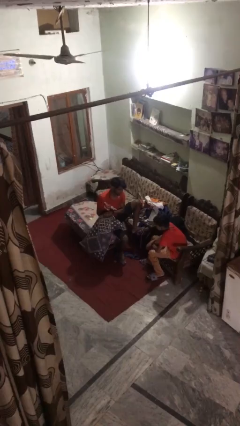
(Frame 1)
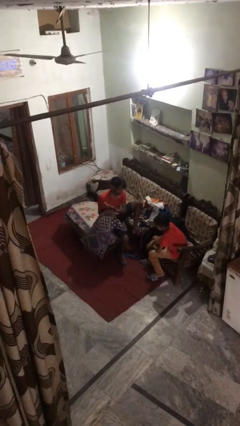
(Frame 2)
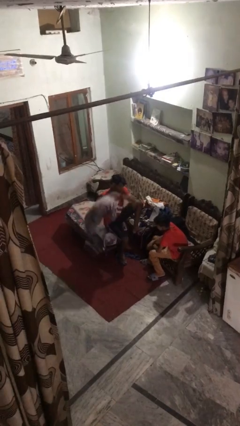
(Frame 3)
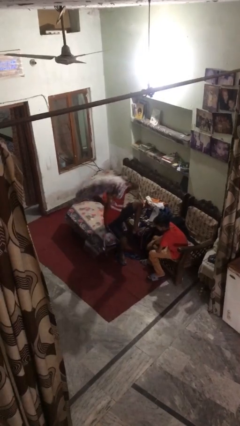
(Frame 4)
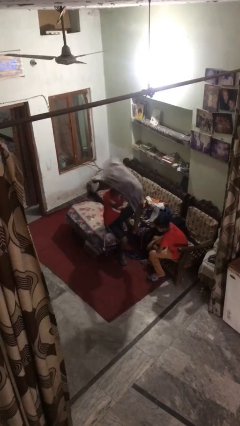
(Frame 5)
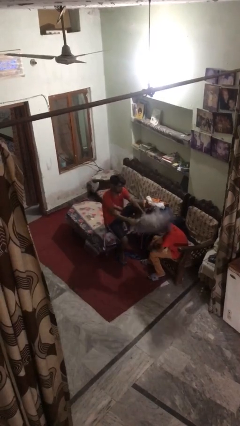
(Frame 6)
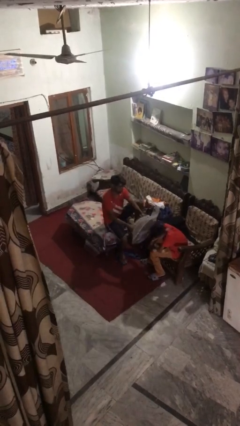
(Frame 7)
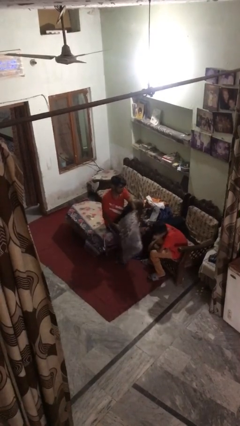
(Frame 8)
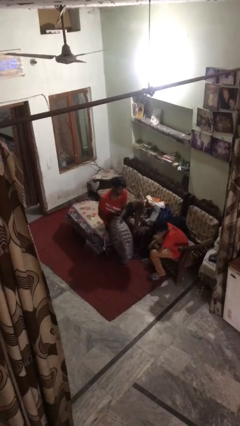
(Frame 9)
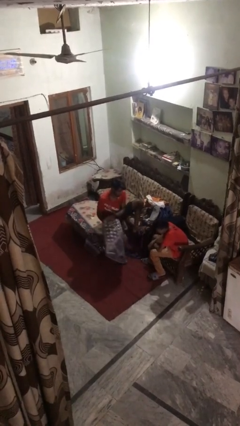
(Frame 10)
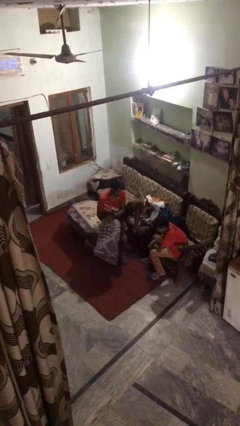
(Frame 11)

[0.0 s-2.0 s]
person hits person with pillow

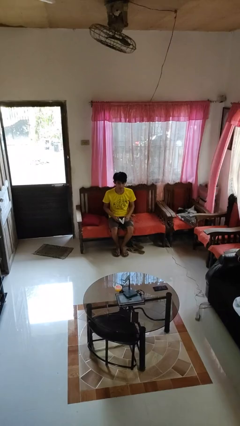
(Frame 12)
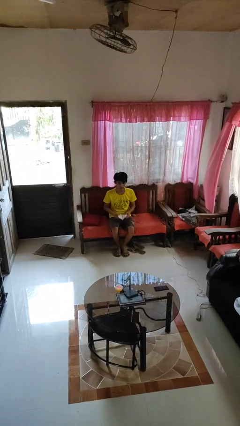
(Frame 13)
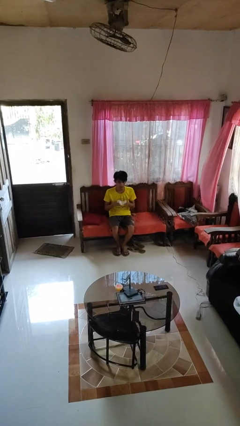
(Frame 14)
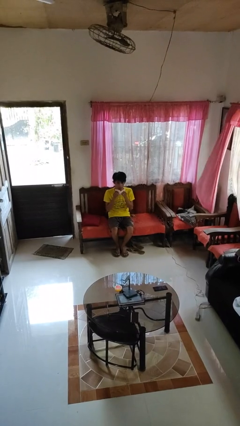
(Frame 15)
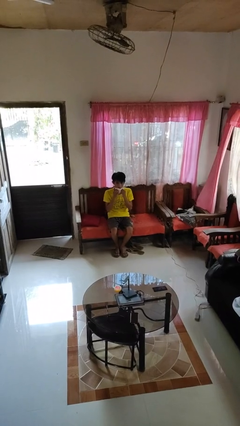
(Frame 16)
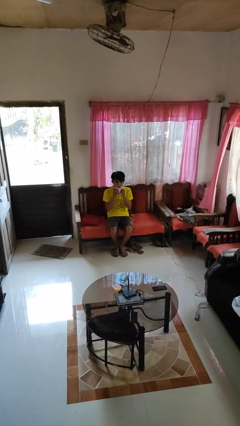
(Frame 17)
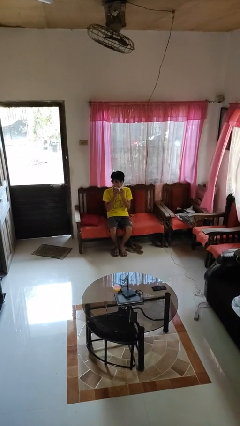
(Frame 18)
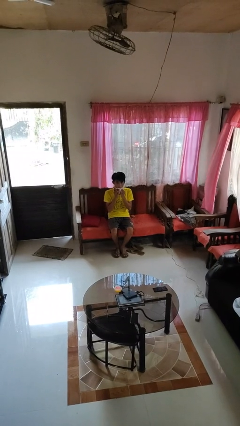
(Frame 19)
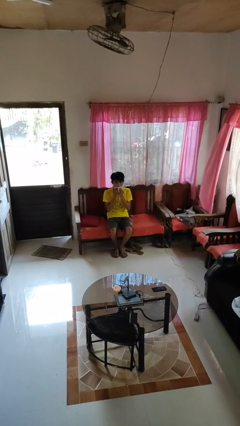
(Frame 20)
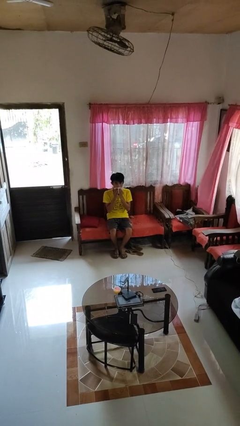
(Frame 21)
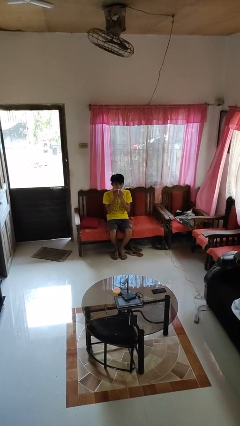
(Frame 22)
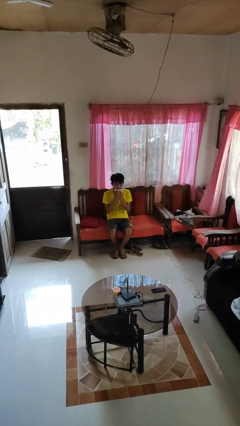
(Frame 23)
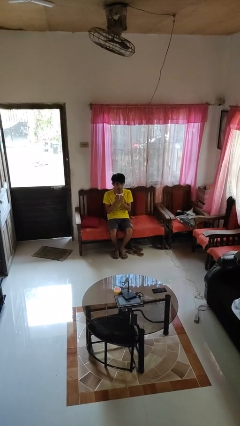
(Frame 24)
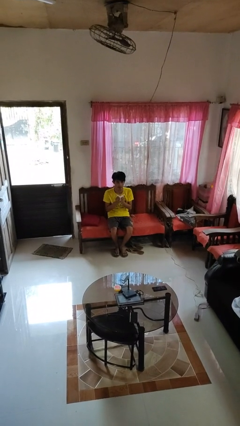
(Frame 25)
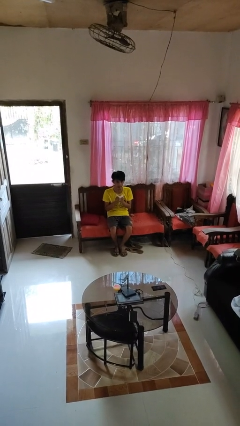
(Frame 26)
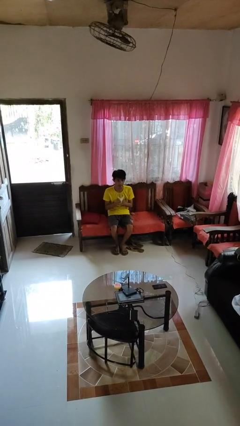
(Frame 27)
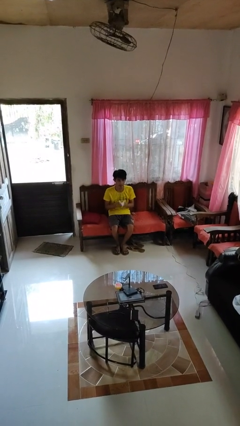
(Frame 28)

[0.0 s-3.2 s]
person wipes mouth with napkin

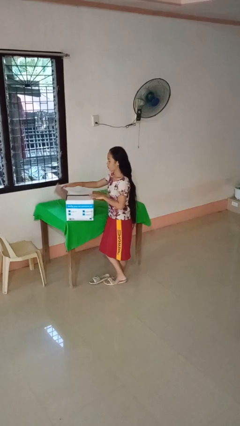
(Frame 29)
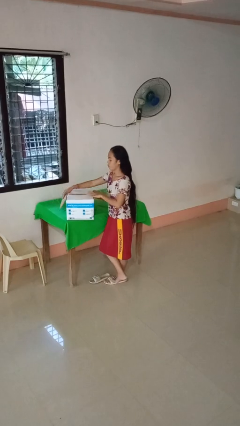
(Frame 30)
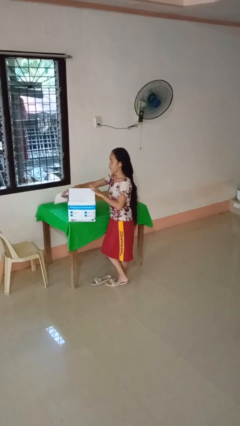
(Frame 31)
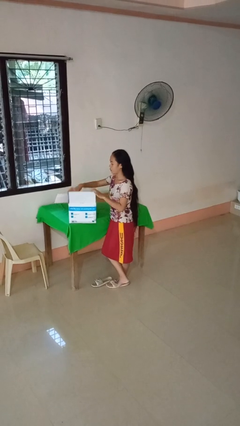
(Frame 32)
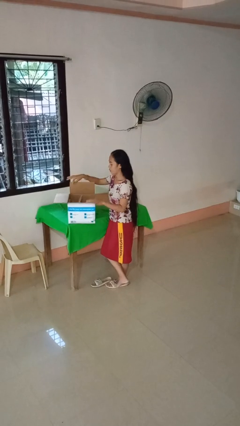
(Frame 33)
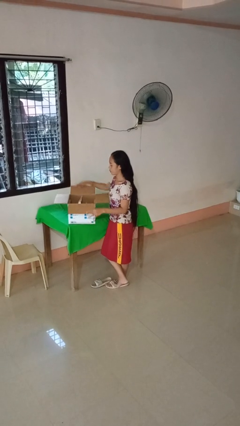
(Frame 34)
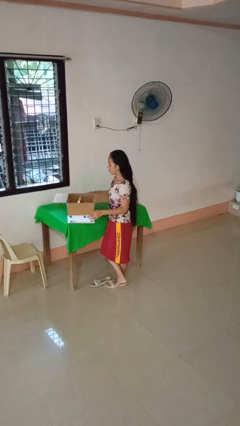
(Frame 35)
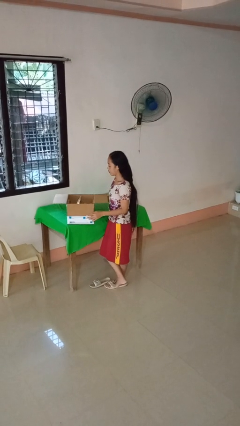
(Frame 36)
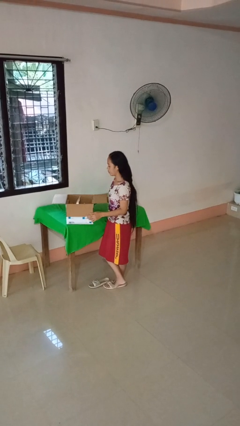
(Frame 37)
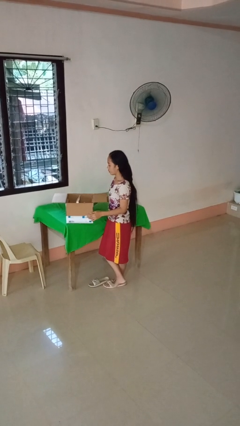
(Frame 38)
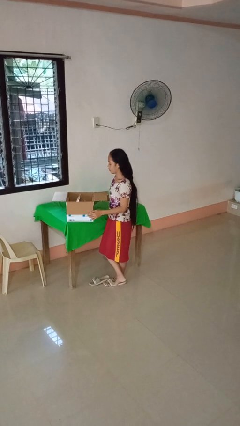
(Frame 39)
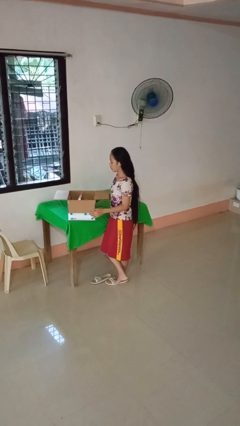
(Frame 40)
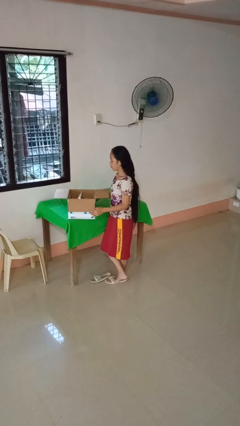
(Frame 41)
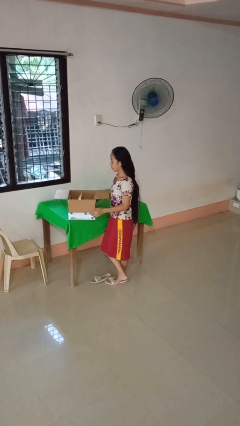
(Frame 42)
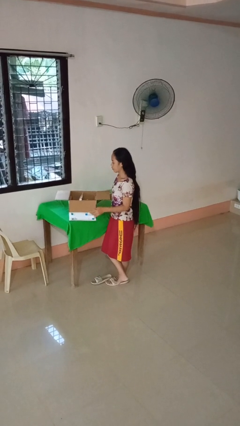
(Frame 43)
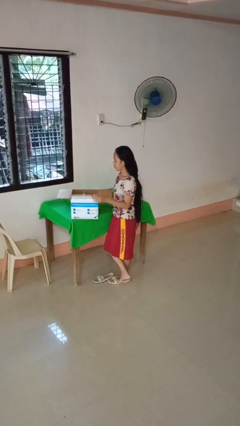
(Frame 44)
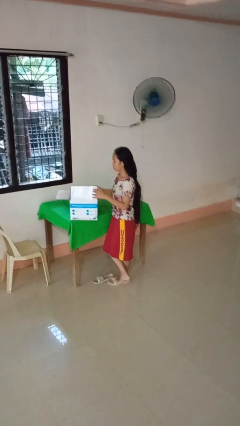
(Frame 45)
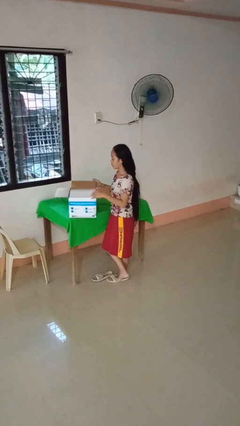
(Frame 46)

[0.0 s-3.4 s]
person opens box

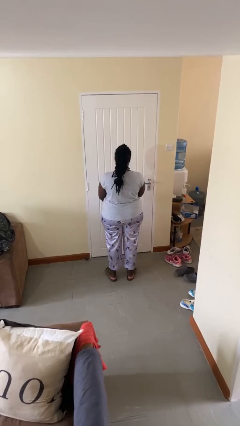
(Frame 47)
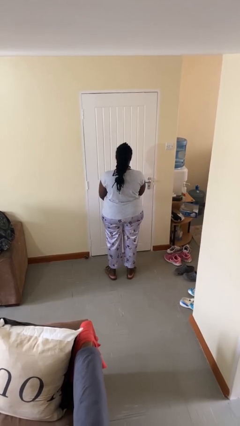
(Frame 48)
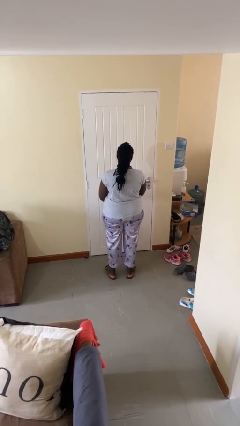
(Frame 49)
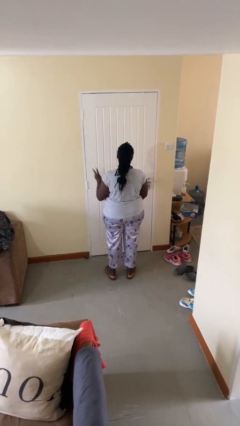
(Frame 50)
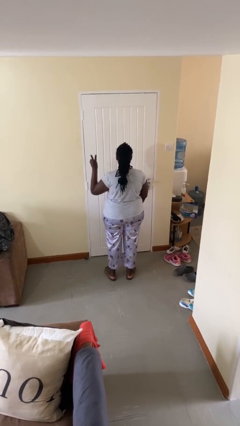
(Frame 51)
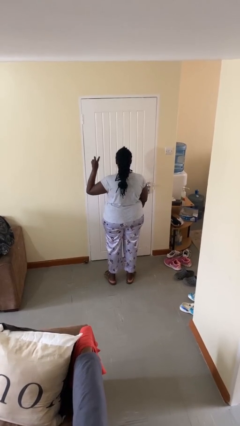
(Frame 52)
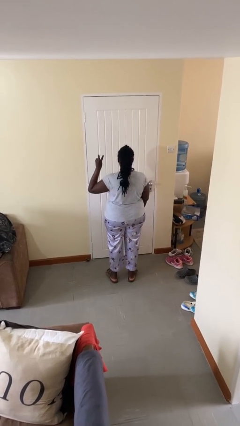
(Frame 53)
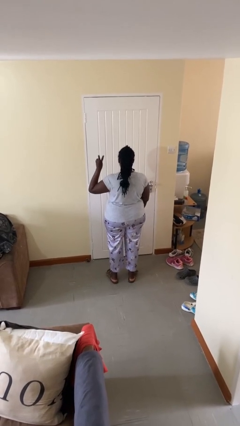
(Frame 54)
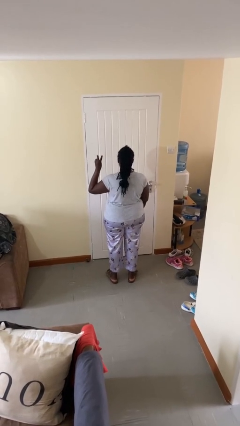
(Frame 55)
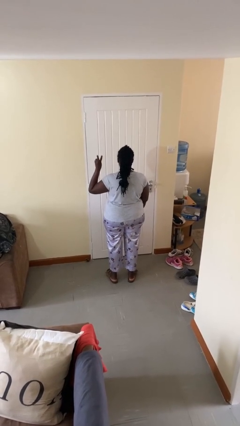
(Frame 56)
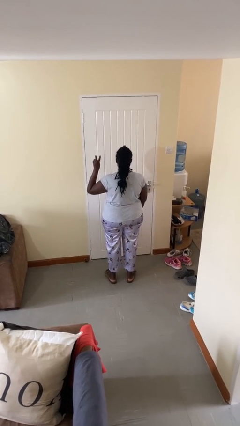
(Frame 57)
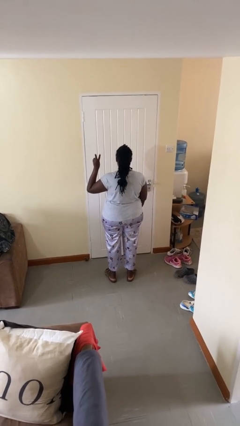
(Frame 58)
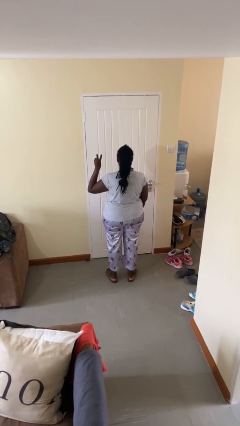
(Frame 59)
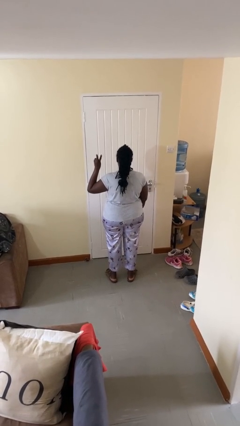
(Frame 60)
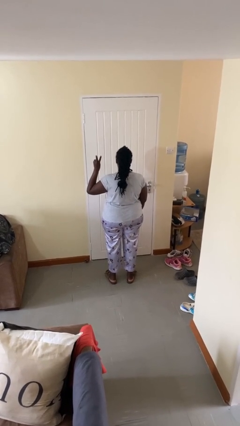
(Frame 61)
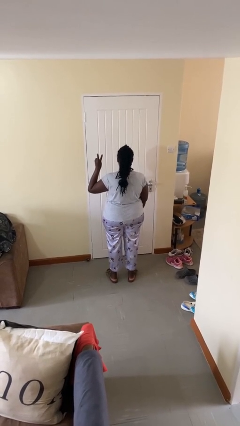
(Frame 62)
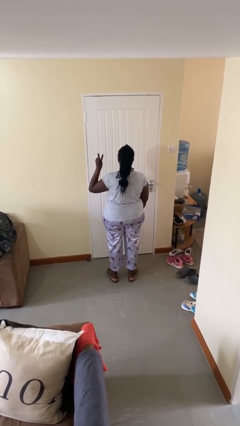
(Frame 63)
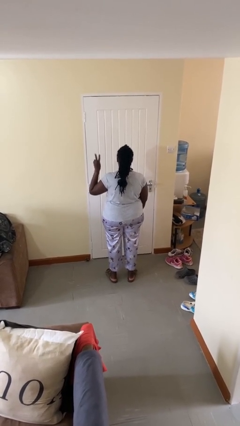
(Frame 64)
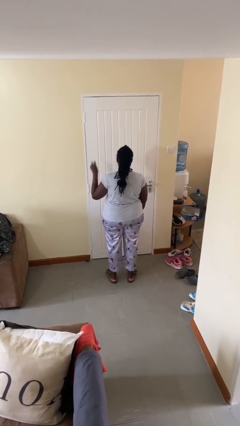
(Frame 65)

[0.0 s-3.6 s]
person gestures peace

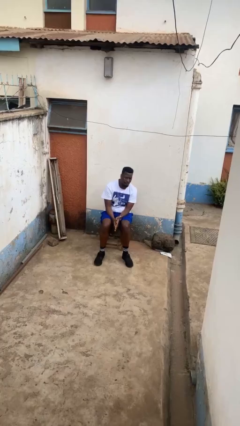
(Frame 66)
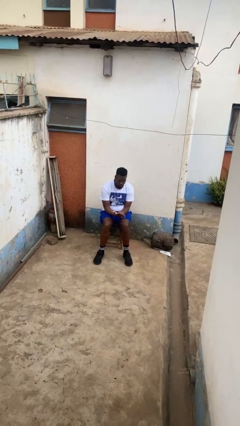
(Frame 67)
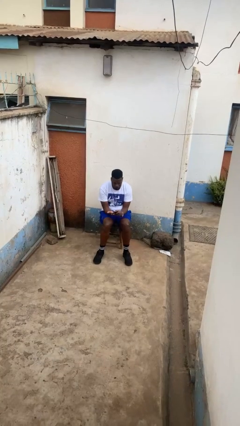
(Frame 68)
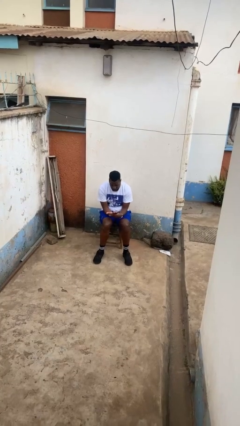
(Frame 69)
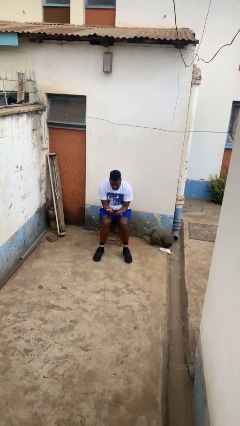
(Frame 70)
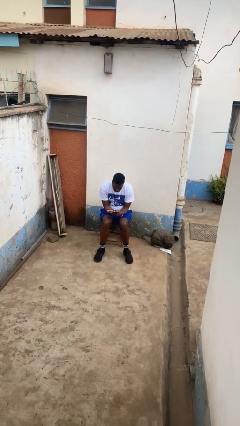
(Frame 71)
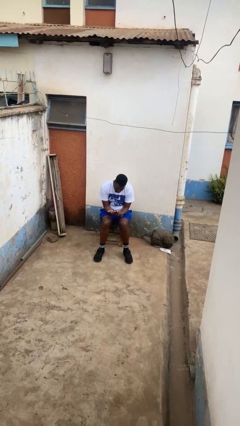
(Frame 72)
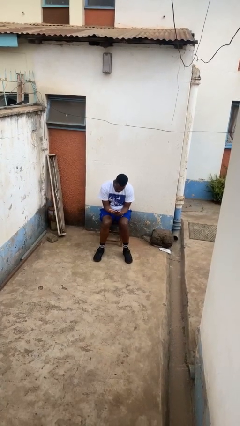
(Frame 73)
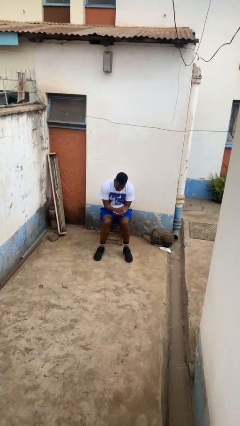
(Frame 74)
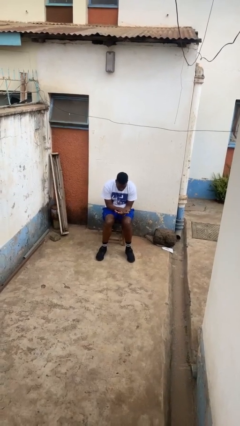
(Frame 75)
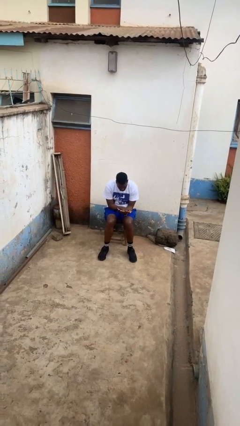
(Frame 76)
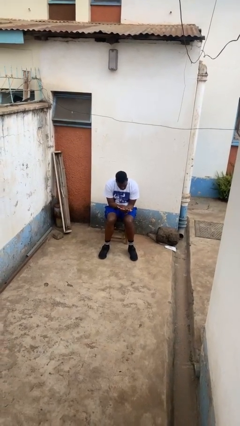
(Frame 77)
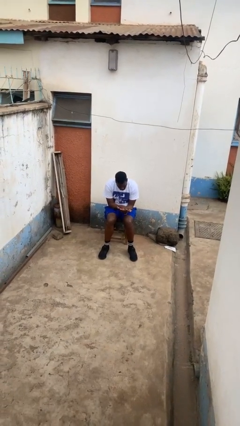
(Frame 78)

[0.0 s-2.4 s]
person looks at hands in lap

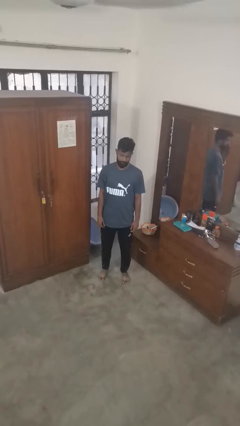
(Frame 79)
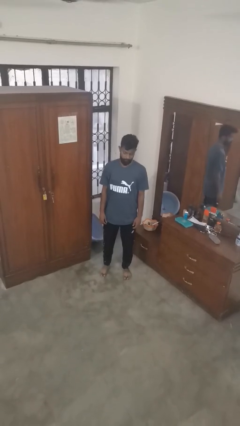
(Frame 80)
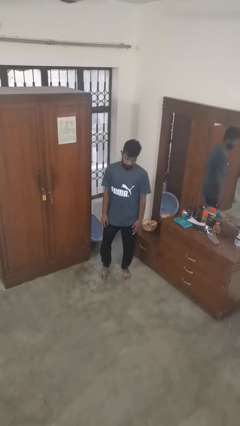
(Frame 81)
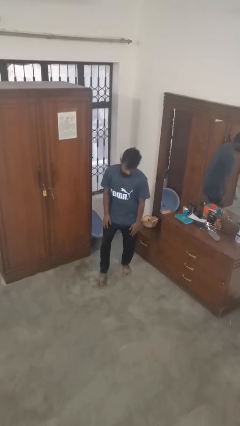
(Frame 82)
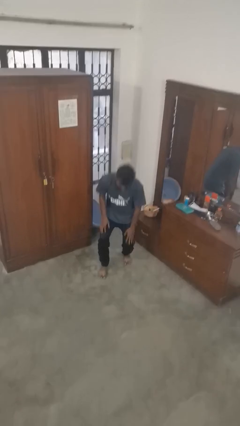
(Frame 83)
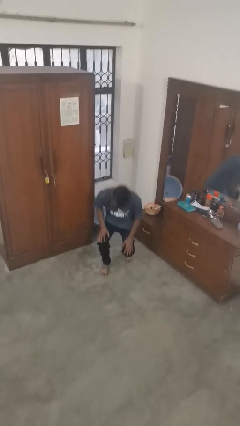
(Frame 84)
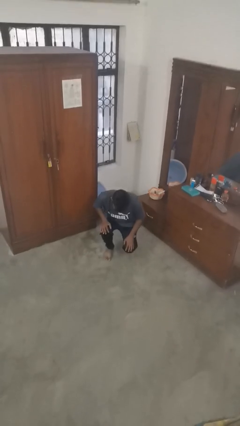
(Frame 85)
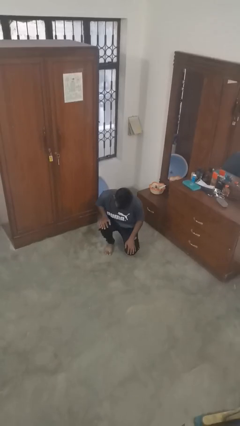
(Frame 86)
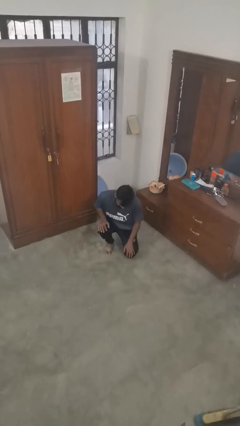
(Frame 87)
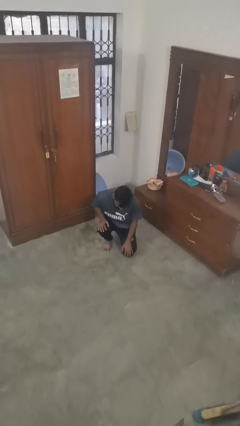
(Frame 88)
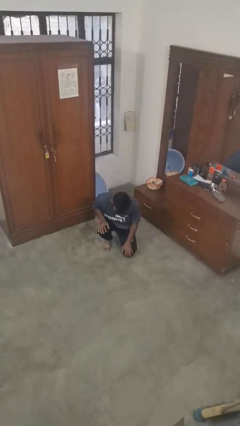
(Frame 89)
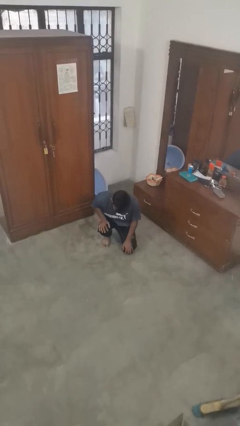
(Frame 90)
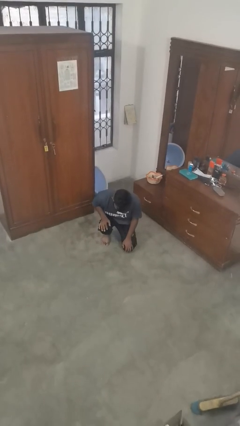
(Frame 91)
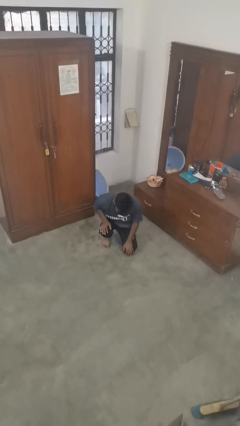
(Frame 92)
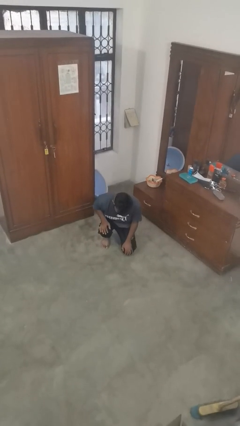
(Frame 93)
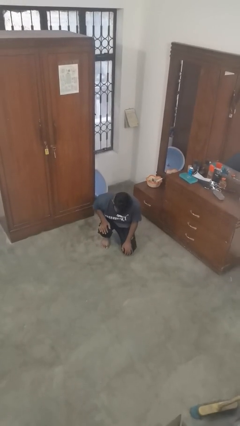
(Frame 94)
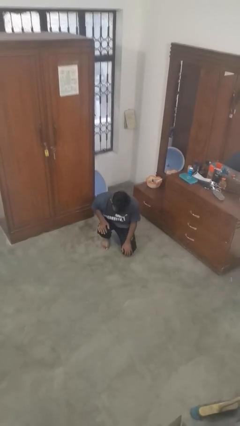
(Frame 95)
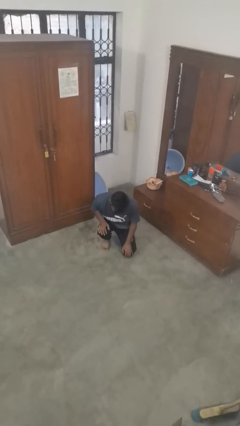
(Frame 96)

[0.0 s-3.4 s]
person kneels
